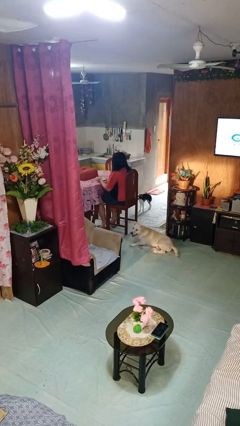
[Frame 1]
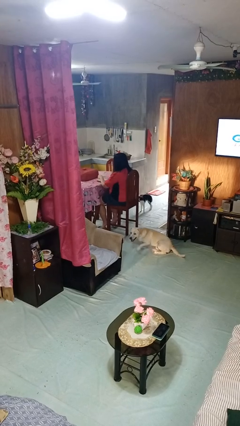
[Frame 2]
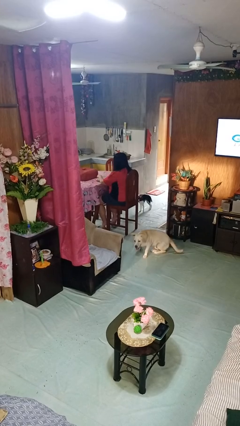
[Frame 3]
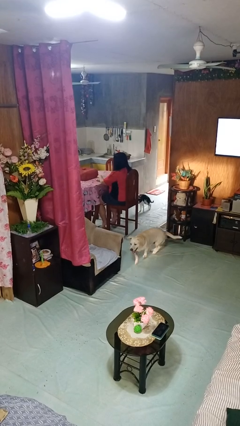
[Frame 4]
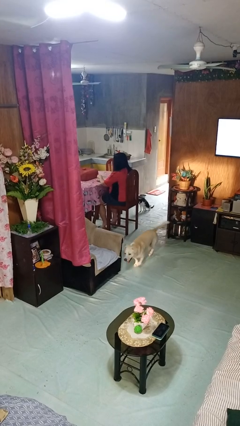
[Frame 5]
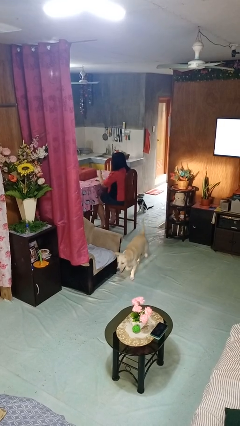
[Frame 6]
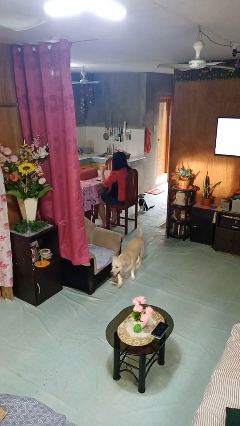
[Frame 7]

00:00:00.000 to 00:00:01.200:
person eats with hands

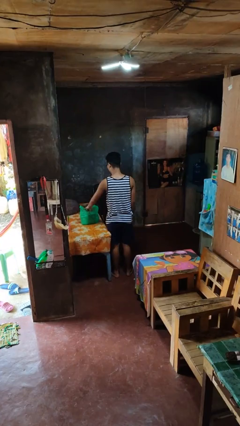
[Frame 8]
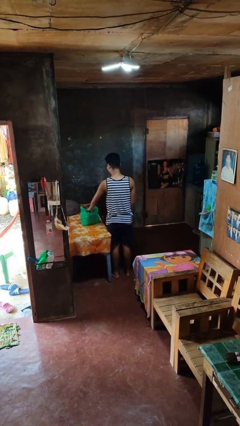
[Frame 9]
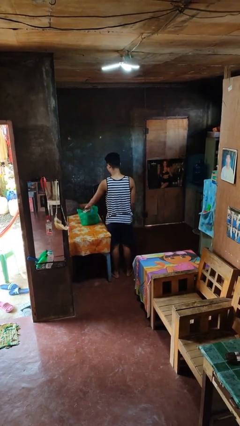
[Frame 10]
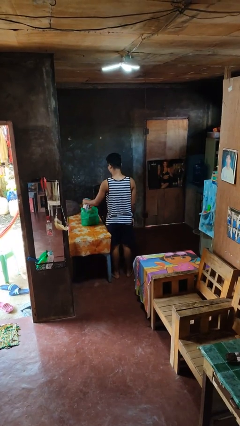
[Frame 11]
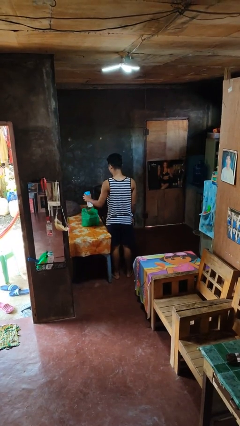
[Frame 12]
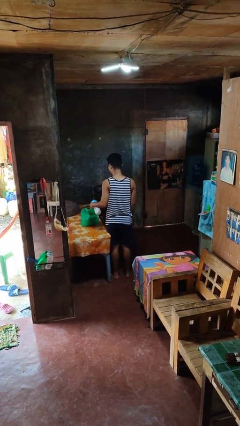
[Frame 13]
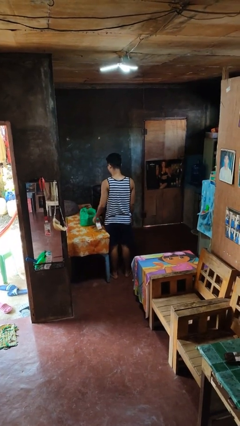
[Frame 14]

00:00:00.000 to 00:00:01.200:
person takes object from bag

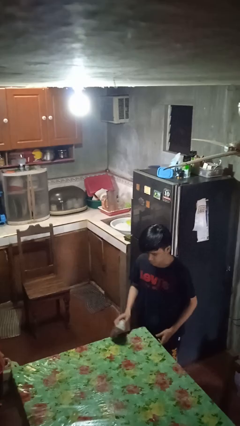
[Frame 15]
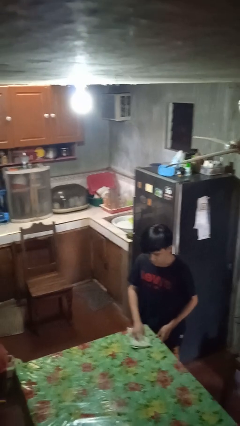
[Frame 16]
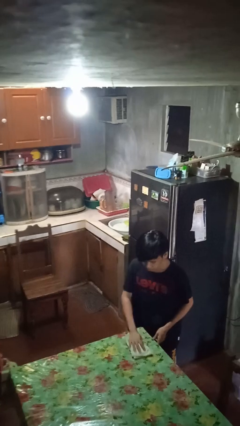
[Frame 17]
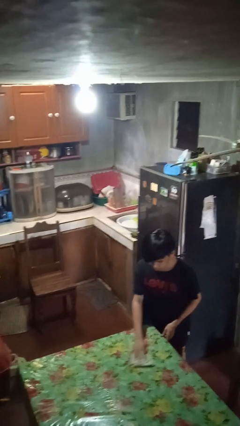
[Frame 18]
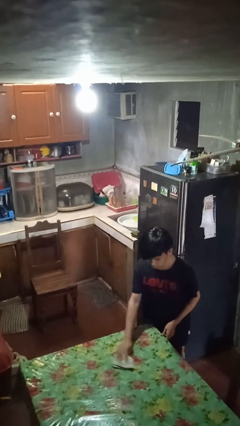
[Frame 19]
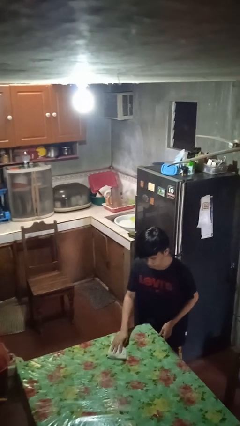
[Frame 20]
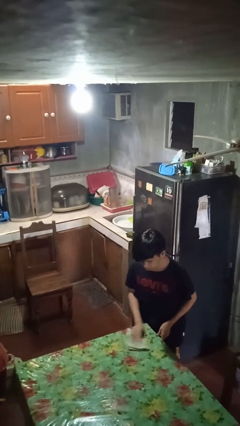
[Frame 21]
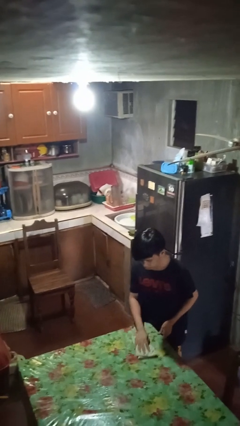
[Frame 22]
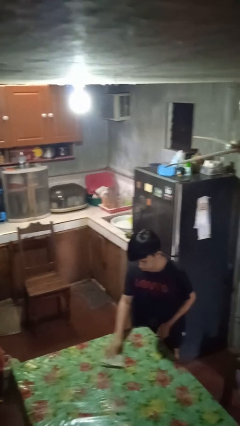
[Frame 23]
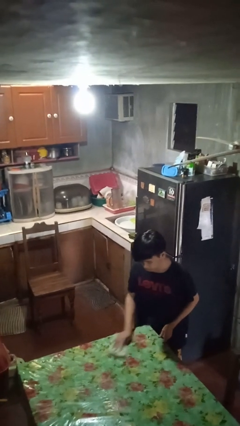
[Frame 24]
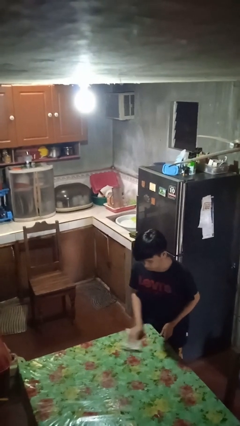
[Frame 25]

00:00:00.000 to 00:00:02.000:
person cleans table with rag

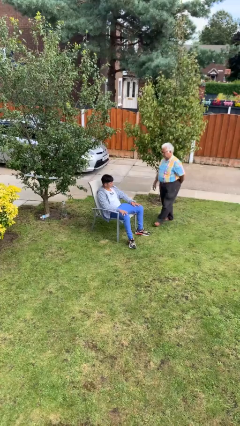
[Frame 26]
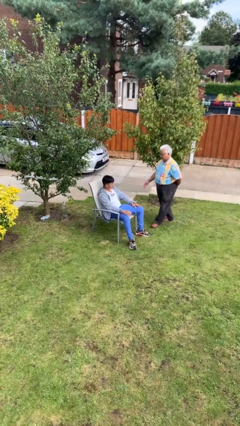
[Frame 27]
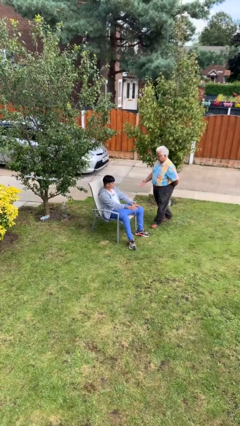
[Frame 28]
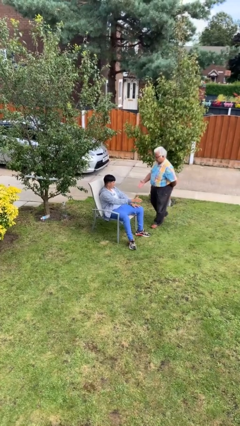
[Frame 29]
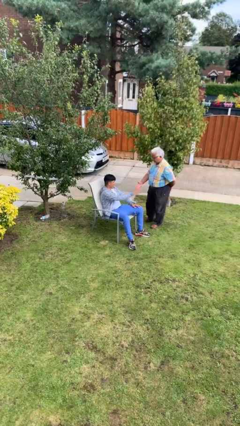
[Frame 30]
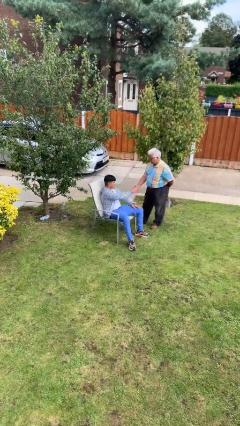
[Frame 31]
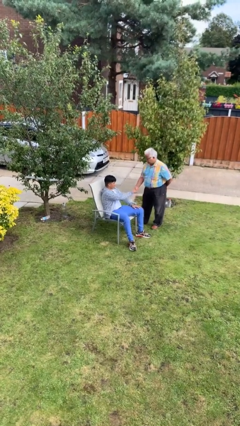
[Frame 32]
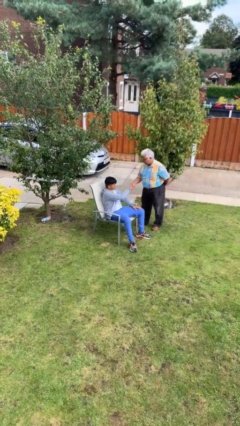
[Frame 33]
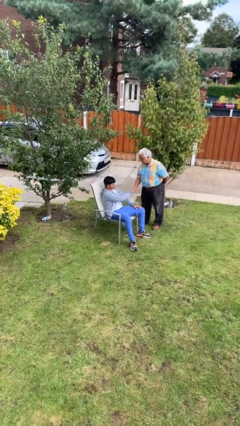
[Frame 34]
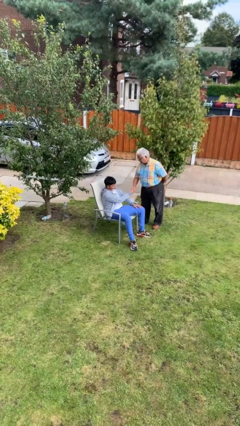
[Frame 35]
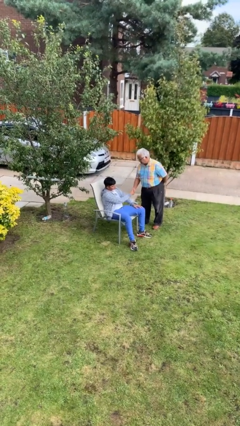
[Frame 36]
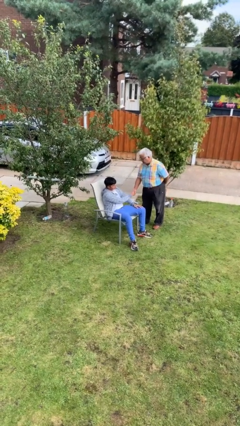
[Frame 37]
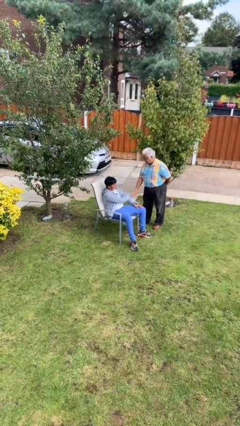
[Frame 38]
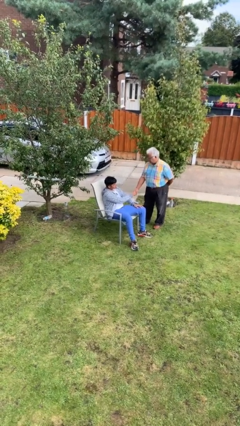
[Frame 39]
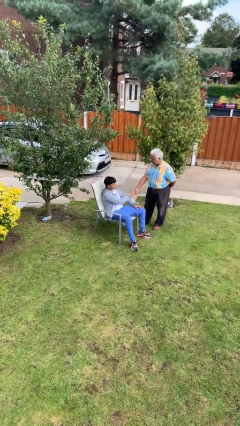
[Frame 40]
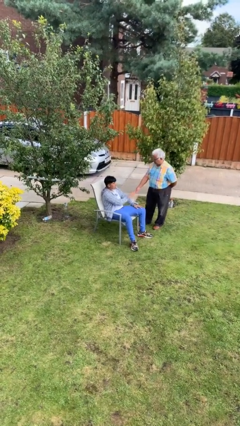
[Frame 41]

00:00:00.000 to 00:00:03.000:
person shakes hand

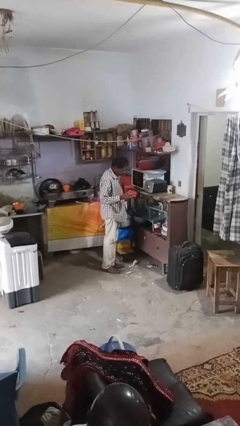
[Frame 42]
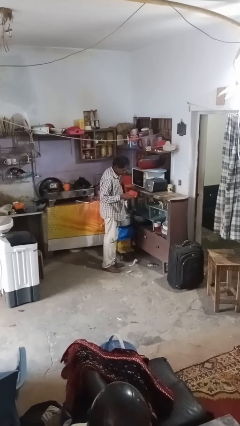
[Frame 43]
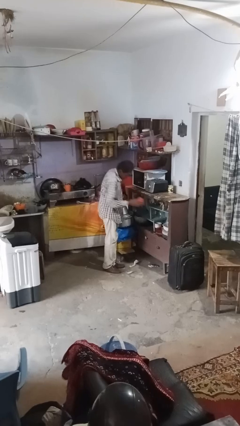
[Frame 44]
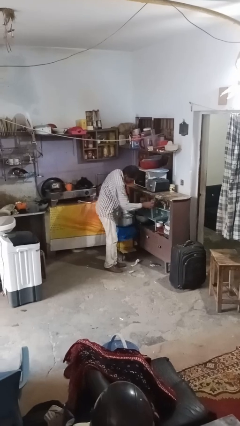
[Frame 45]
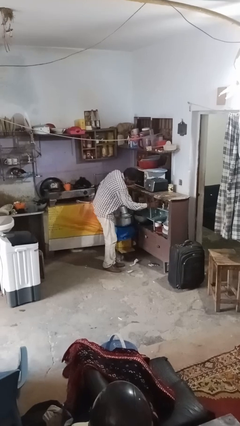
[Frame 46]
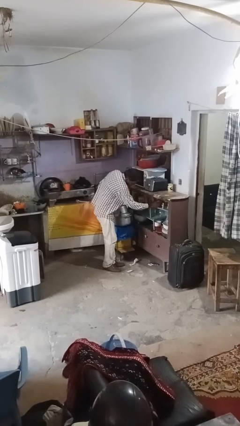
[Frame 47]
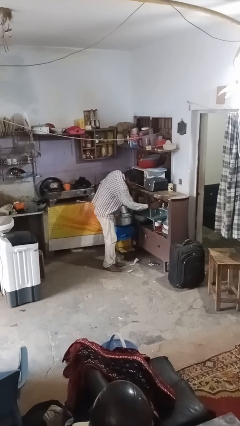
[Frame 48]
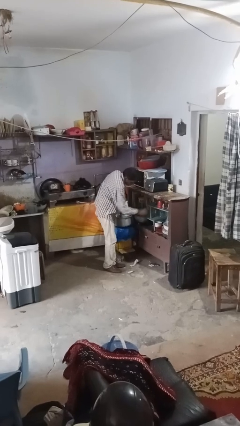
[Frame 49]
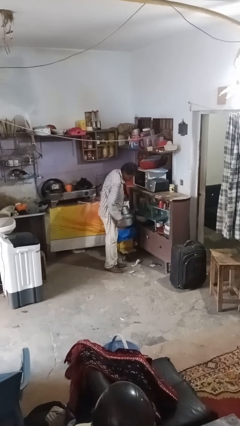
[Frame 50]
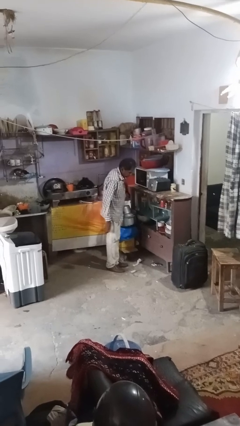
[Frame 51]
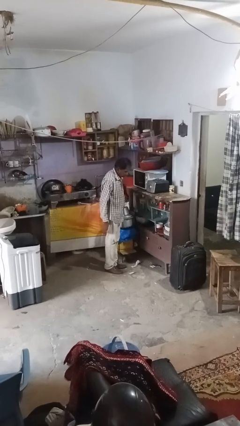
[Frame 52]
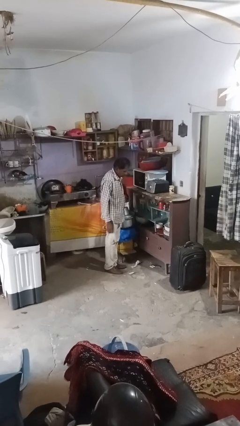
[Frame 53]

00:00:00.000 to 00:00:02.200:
person puts object into kitchen drawer

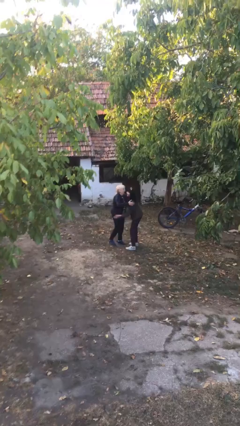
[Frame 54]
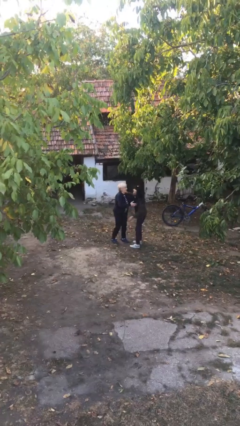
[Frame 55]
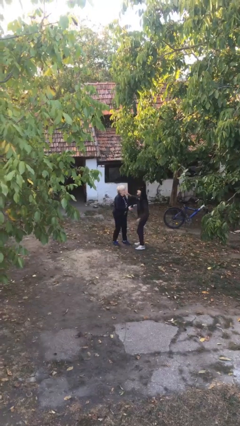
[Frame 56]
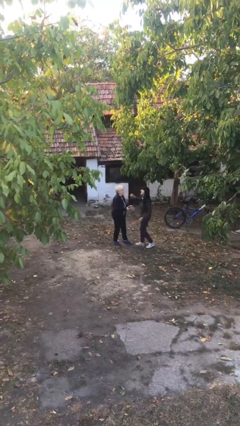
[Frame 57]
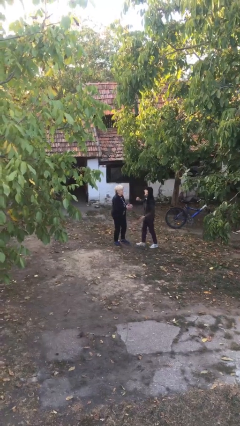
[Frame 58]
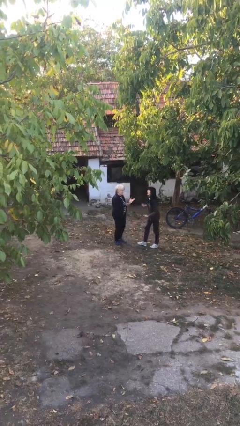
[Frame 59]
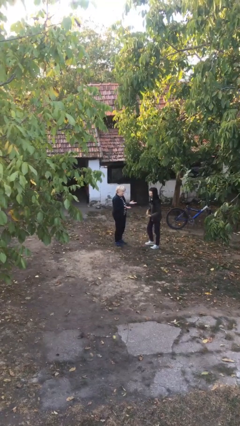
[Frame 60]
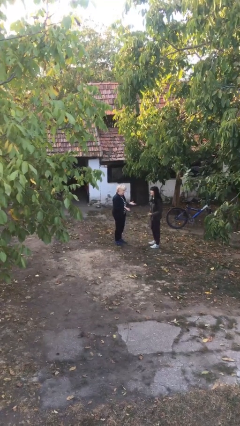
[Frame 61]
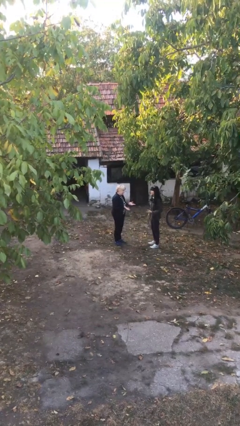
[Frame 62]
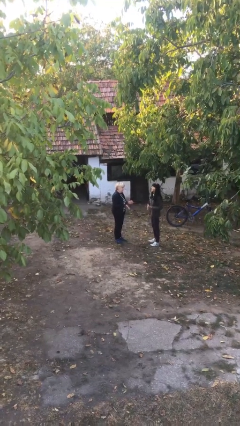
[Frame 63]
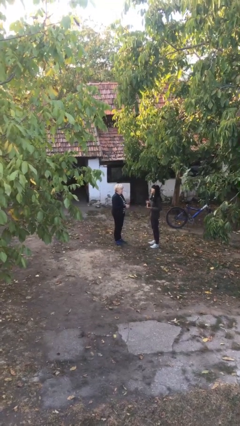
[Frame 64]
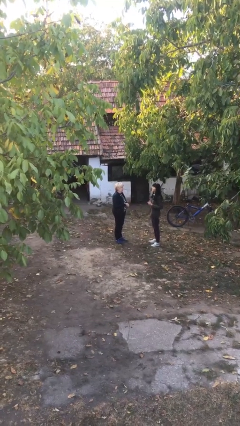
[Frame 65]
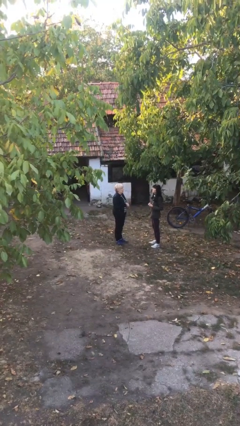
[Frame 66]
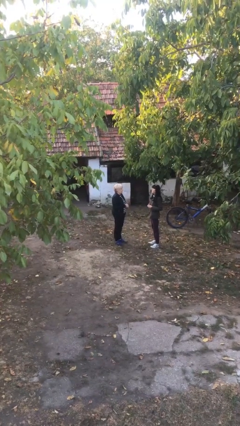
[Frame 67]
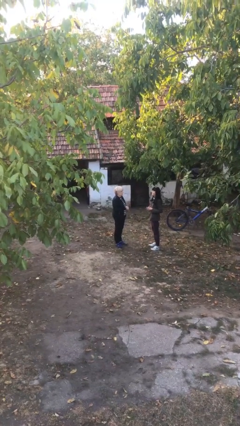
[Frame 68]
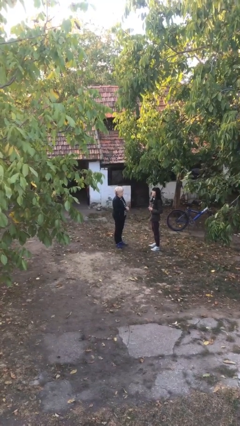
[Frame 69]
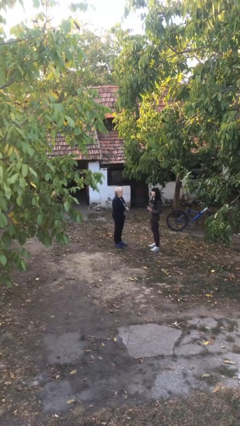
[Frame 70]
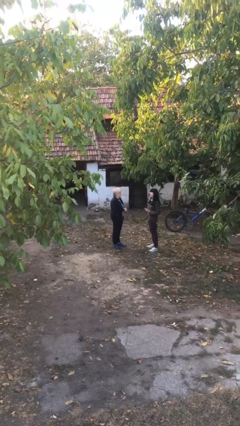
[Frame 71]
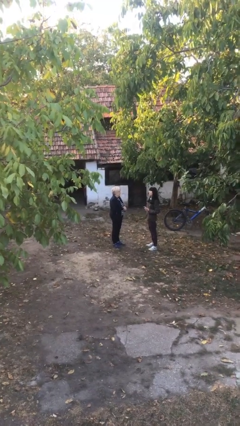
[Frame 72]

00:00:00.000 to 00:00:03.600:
person talks to person

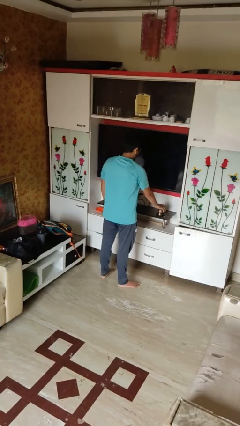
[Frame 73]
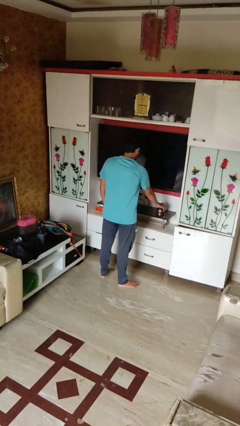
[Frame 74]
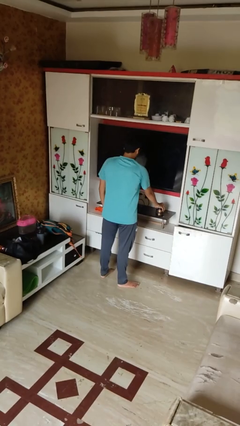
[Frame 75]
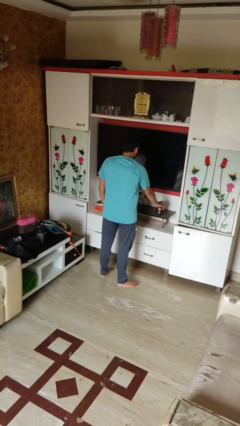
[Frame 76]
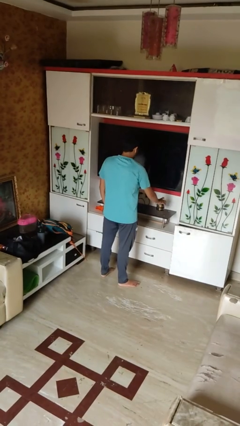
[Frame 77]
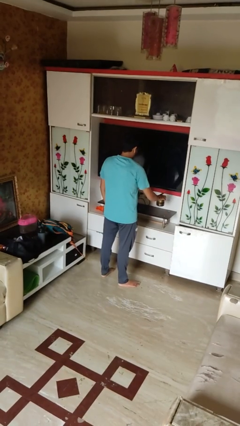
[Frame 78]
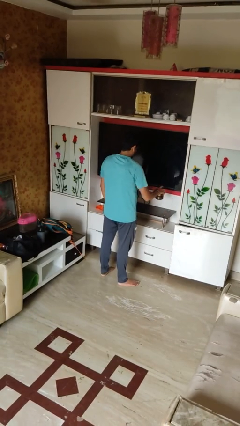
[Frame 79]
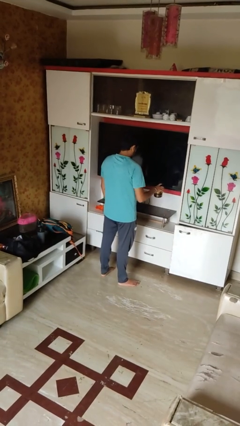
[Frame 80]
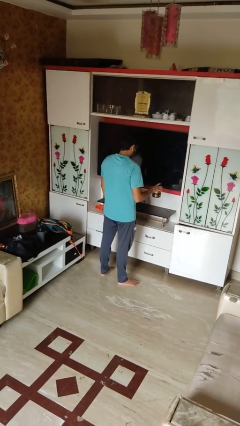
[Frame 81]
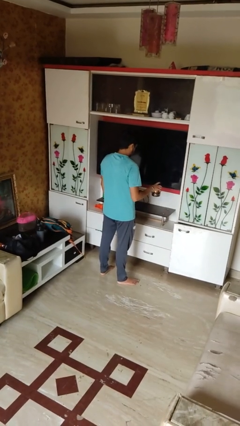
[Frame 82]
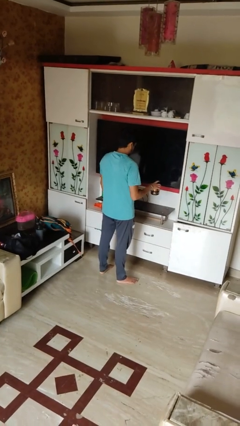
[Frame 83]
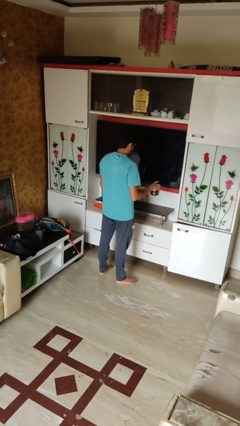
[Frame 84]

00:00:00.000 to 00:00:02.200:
person picks up object from countertop

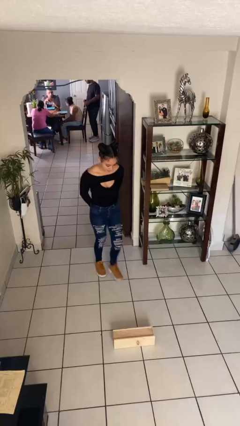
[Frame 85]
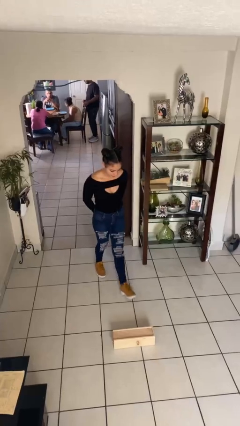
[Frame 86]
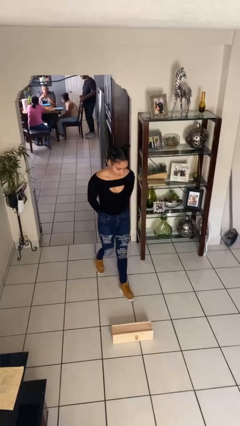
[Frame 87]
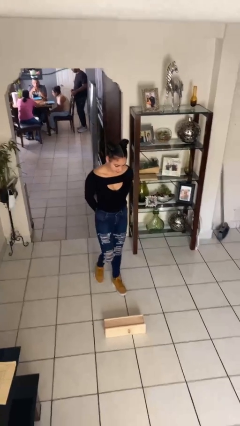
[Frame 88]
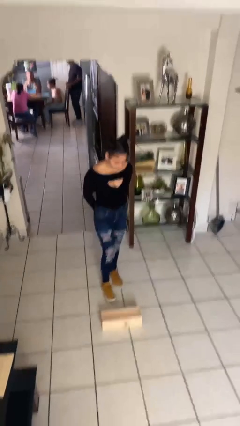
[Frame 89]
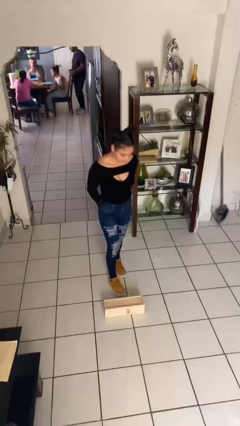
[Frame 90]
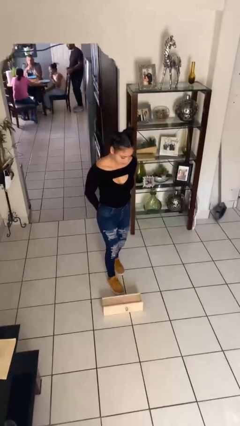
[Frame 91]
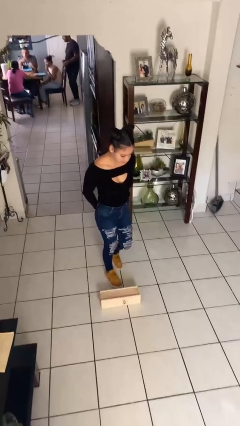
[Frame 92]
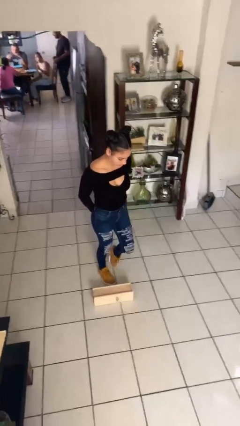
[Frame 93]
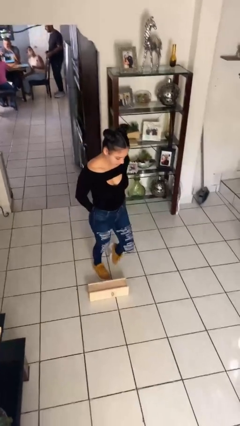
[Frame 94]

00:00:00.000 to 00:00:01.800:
person trips on object on floor

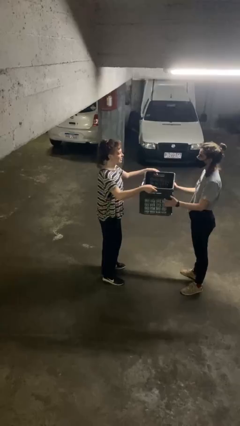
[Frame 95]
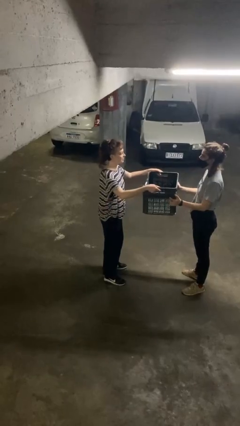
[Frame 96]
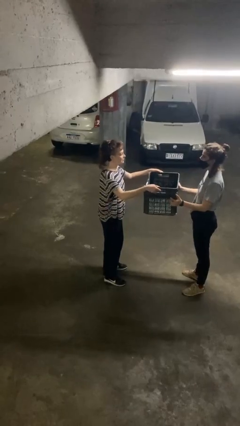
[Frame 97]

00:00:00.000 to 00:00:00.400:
person transfers object to person
